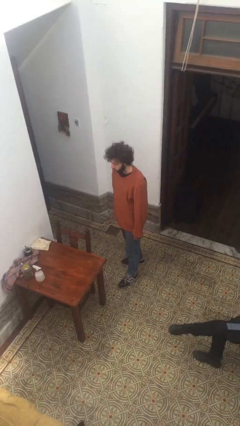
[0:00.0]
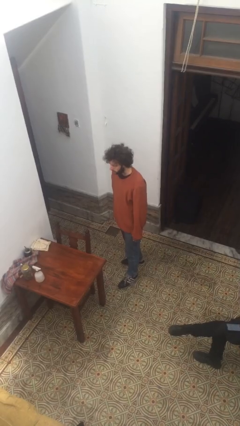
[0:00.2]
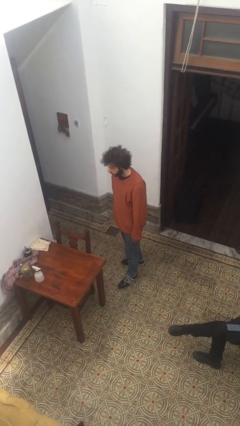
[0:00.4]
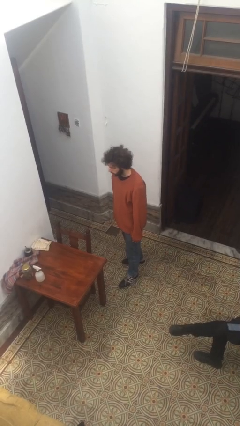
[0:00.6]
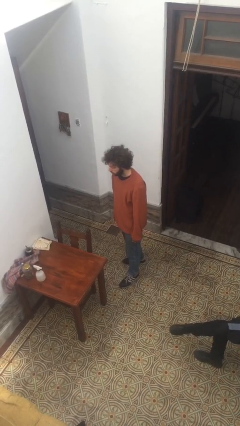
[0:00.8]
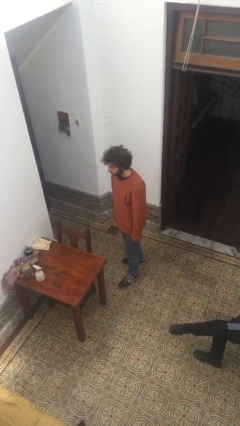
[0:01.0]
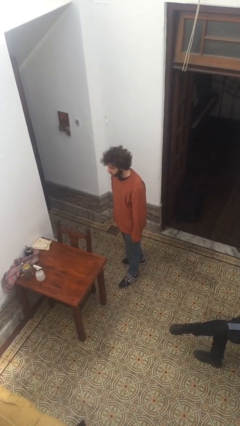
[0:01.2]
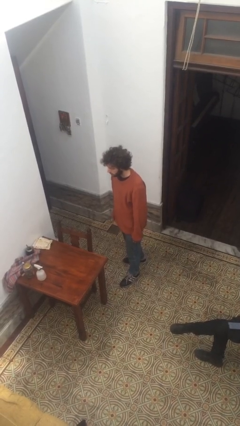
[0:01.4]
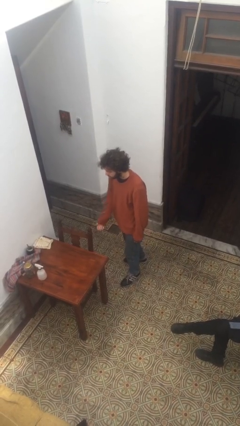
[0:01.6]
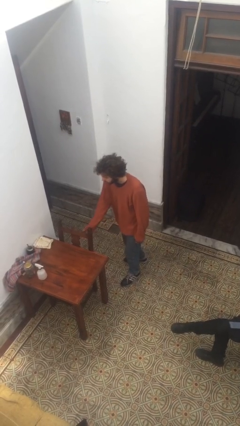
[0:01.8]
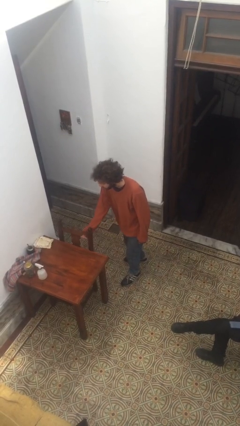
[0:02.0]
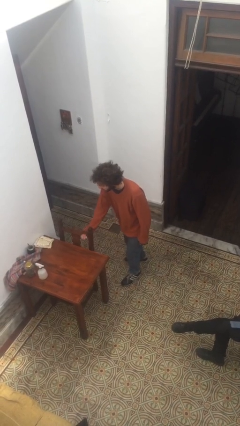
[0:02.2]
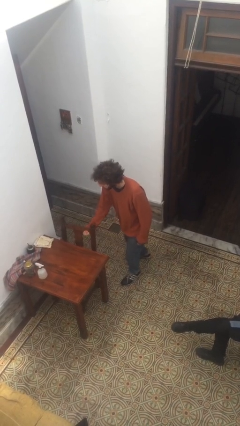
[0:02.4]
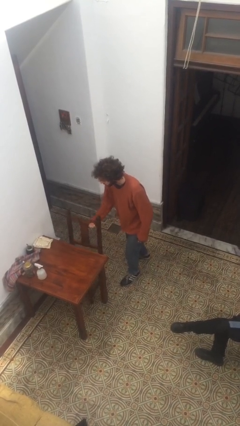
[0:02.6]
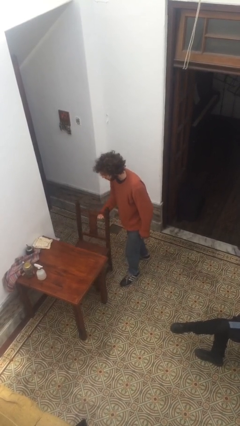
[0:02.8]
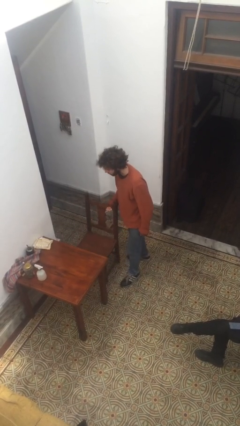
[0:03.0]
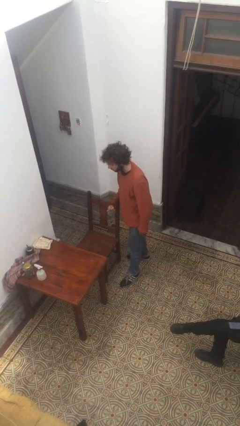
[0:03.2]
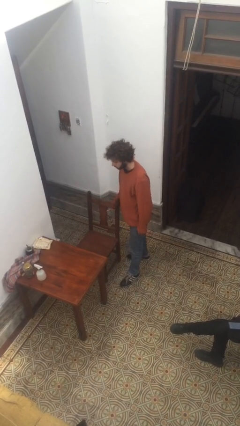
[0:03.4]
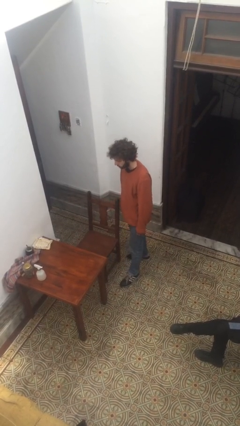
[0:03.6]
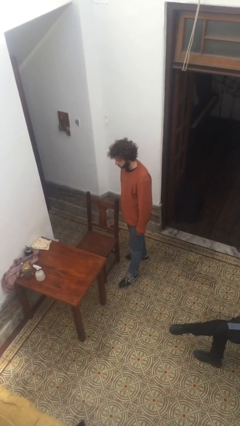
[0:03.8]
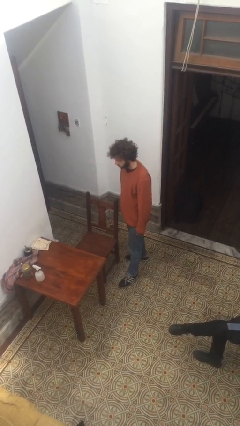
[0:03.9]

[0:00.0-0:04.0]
person pulls out chair

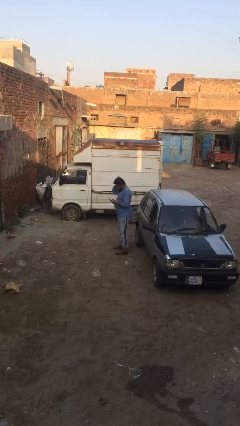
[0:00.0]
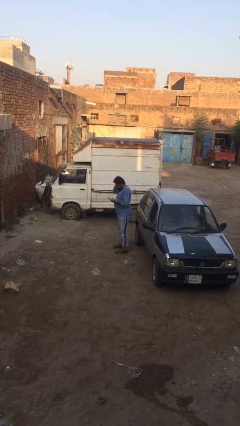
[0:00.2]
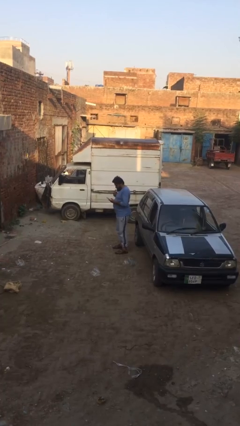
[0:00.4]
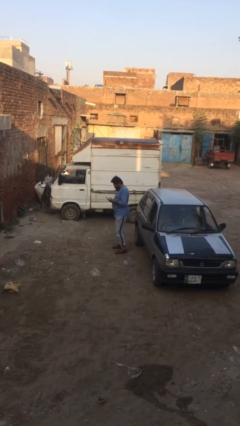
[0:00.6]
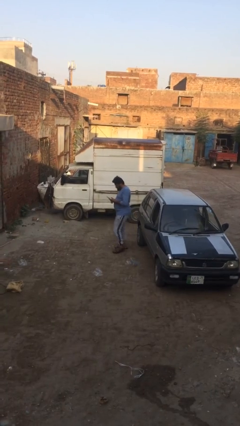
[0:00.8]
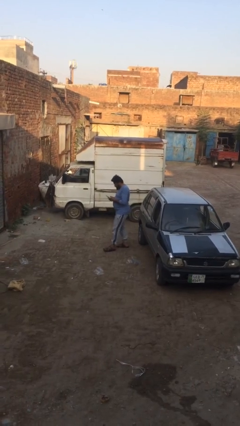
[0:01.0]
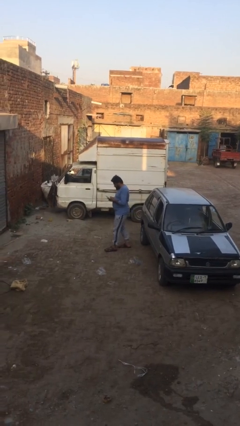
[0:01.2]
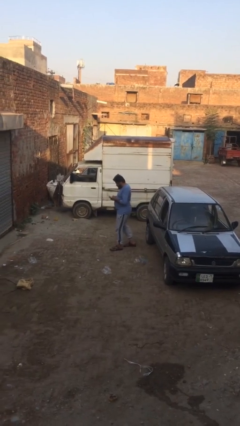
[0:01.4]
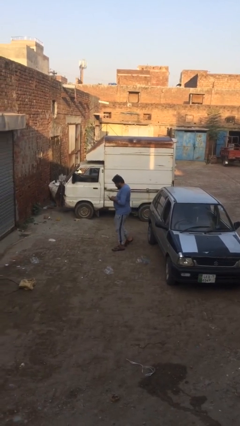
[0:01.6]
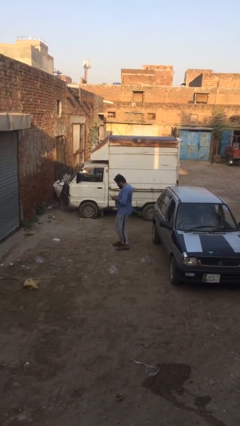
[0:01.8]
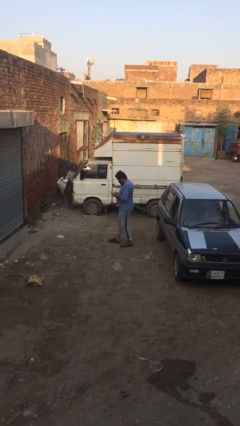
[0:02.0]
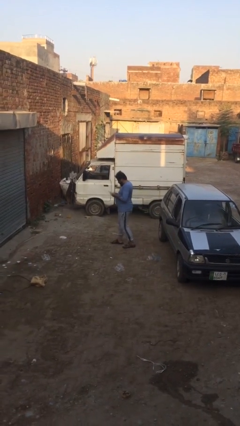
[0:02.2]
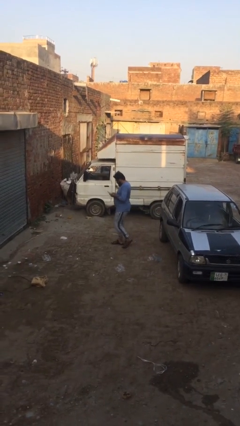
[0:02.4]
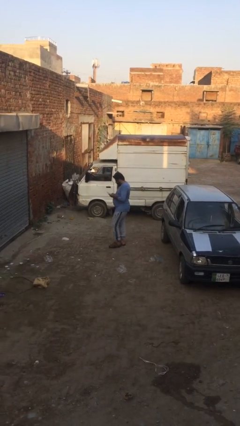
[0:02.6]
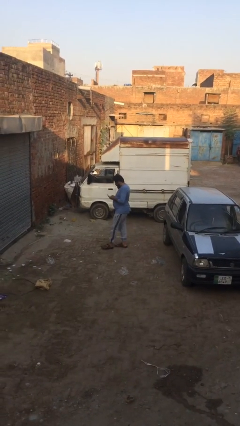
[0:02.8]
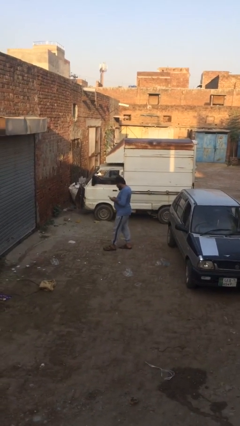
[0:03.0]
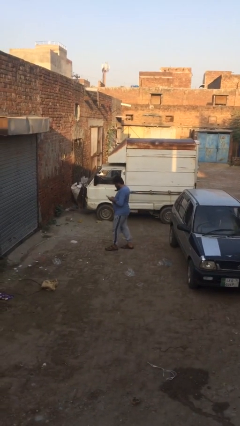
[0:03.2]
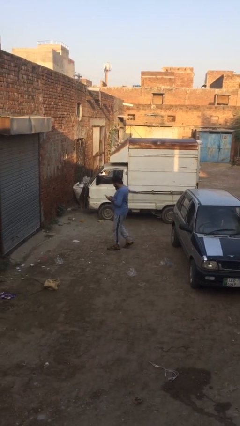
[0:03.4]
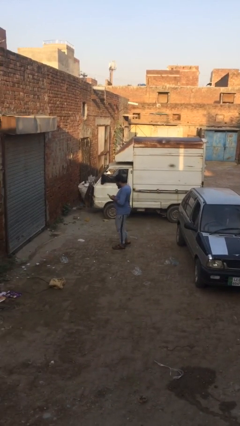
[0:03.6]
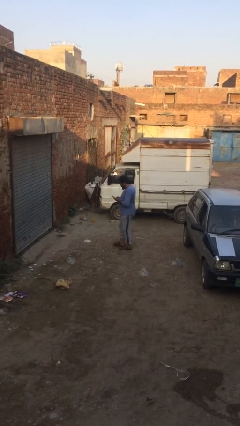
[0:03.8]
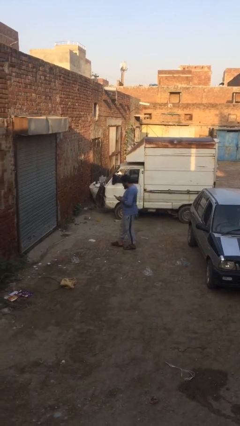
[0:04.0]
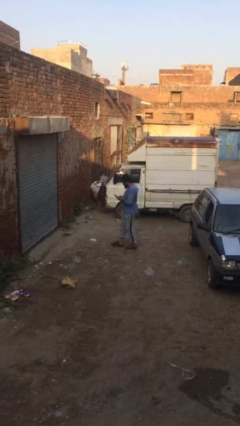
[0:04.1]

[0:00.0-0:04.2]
person texts on phone

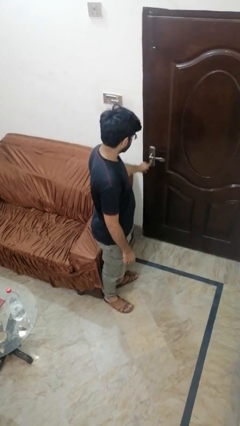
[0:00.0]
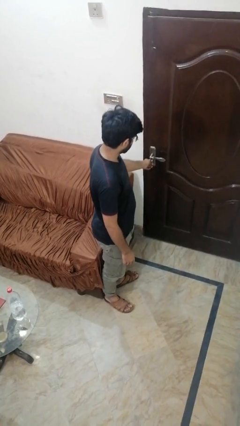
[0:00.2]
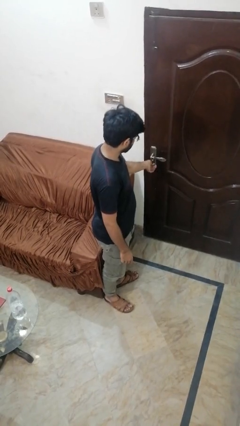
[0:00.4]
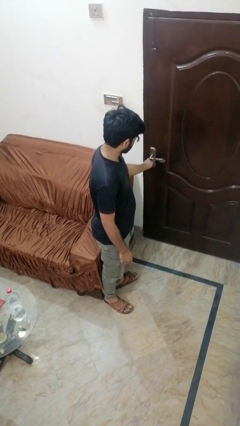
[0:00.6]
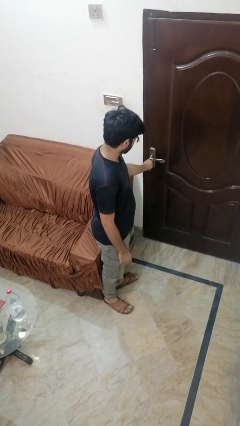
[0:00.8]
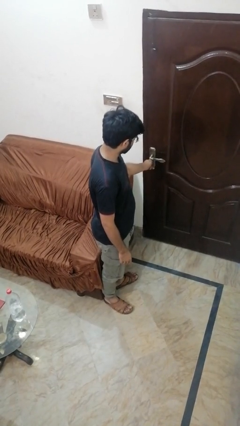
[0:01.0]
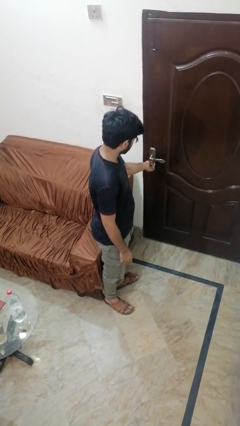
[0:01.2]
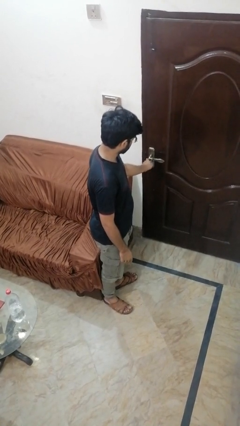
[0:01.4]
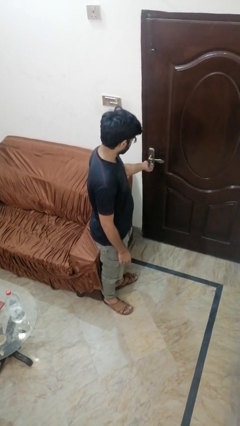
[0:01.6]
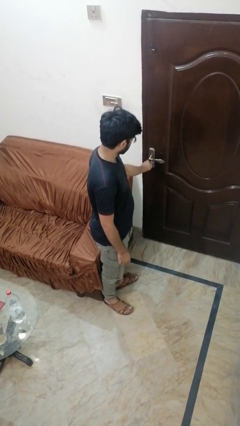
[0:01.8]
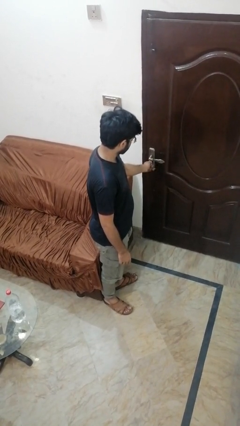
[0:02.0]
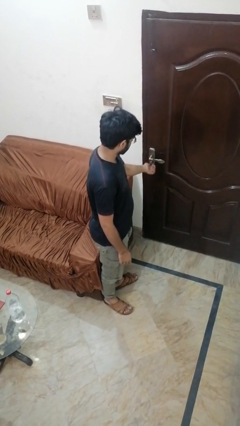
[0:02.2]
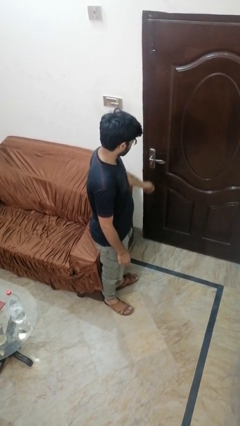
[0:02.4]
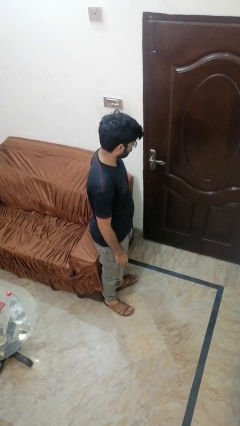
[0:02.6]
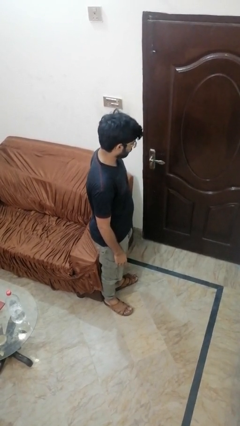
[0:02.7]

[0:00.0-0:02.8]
person locks door with keys

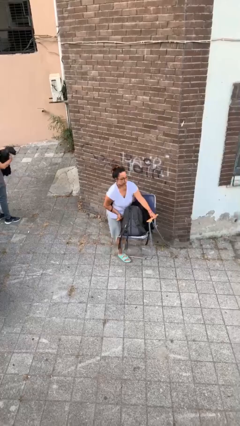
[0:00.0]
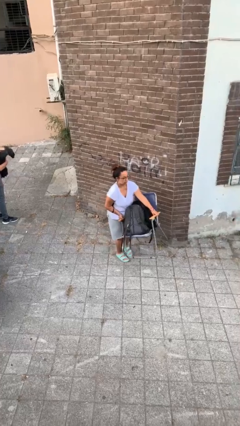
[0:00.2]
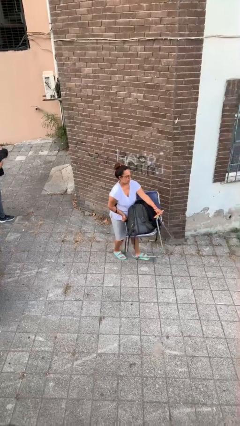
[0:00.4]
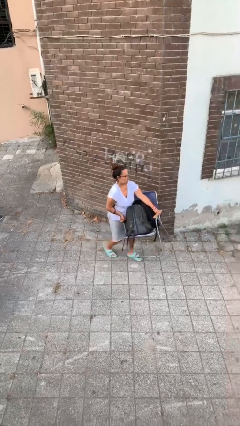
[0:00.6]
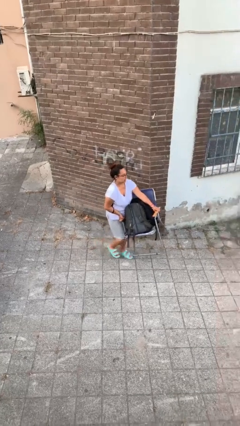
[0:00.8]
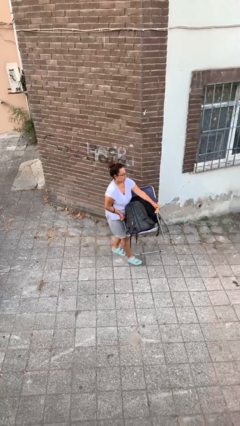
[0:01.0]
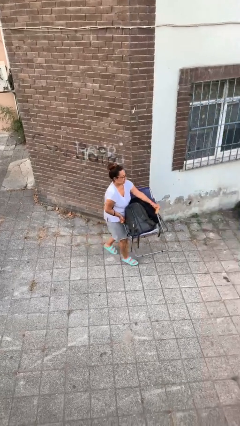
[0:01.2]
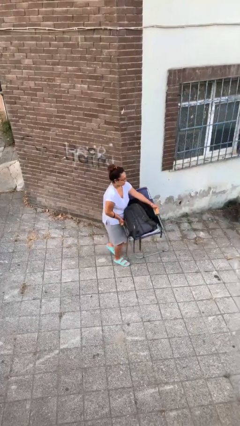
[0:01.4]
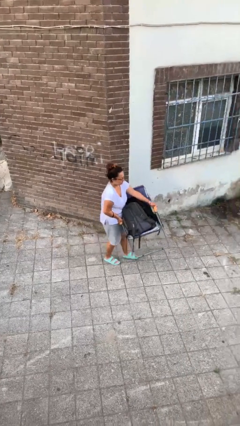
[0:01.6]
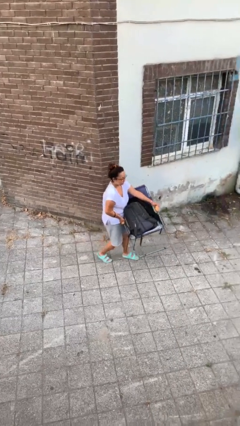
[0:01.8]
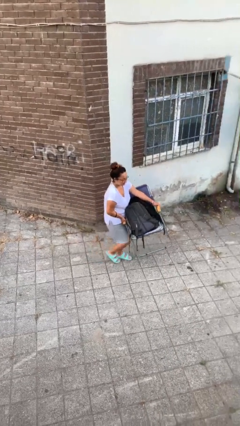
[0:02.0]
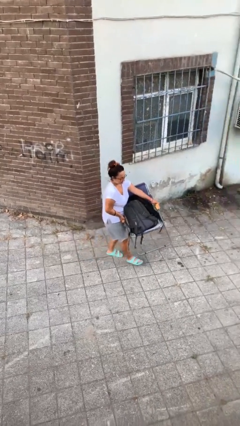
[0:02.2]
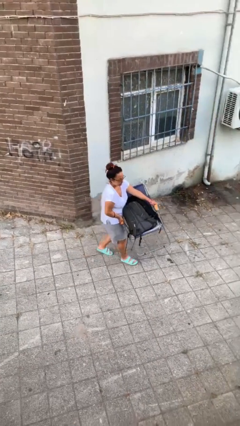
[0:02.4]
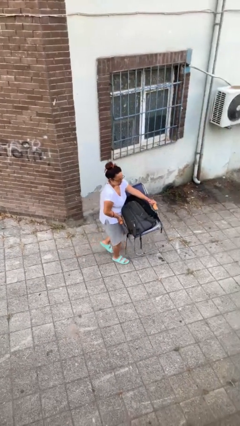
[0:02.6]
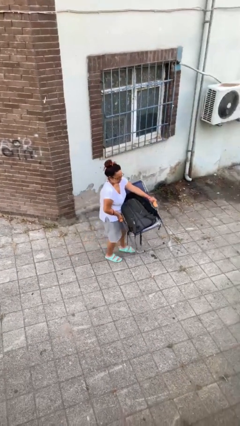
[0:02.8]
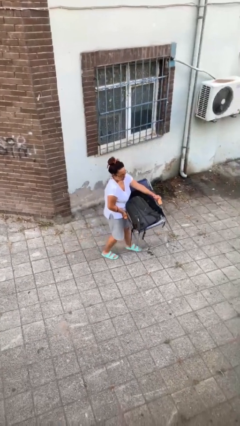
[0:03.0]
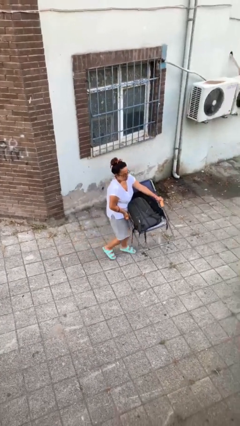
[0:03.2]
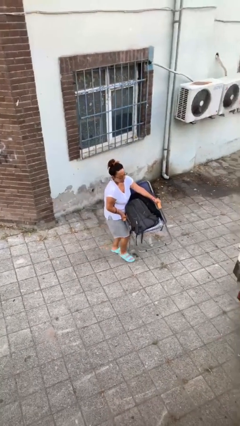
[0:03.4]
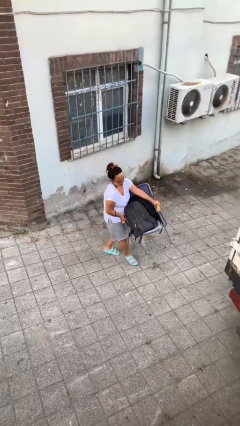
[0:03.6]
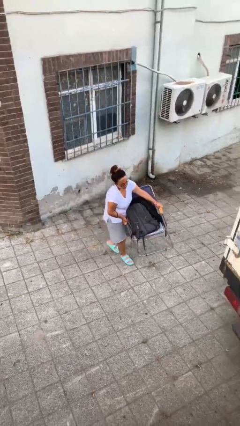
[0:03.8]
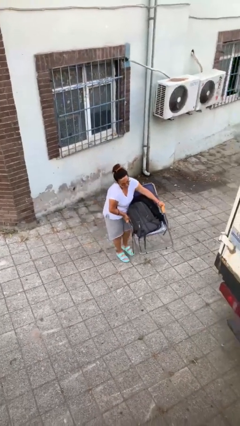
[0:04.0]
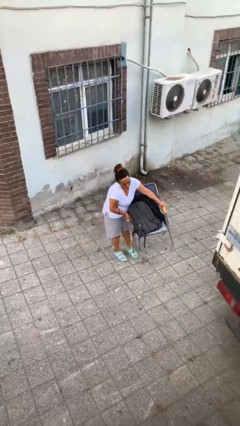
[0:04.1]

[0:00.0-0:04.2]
person carries heavy object

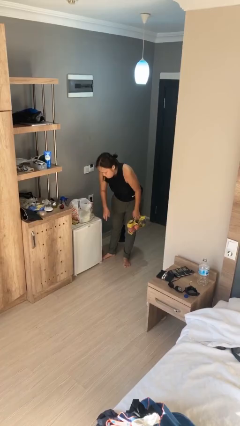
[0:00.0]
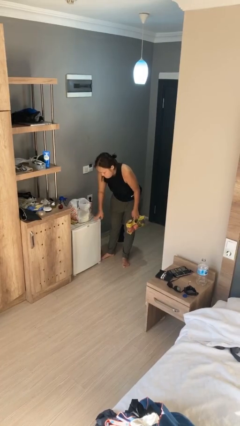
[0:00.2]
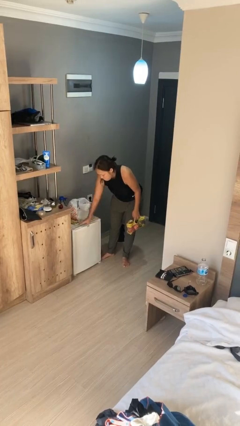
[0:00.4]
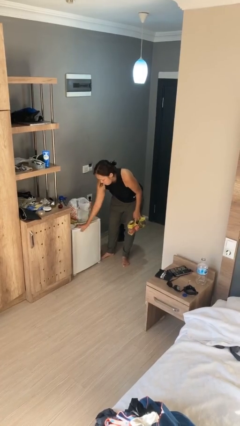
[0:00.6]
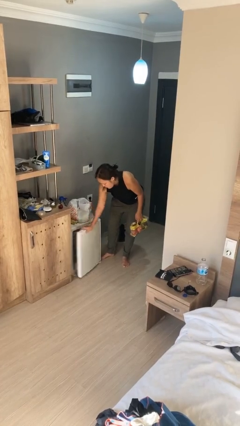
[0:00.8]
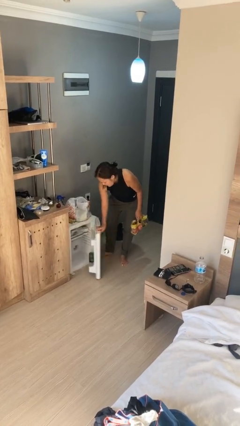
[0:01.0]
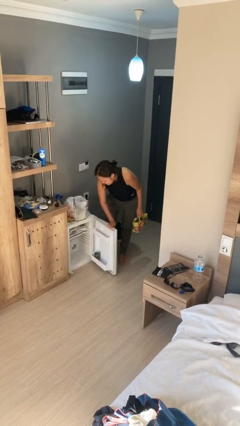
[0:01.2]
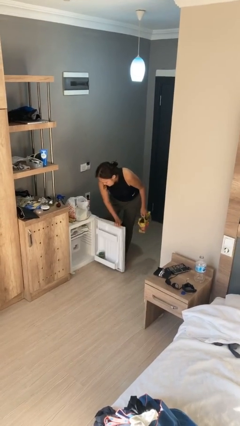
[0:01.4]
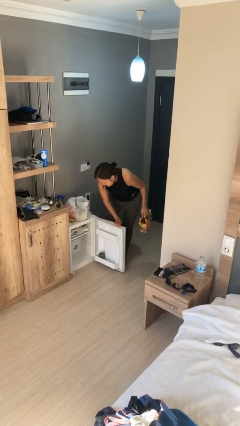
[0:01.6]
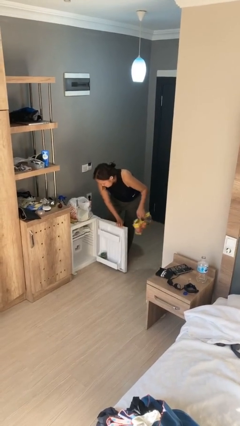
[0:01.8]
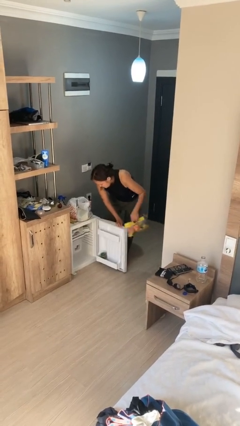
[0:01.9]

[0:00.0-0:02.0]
person opens refrigerator
